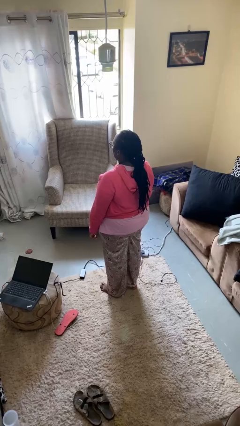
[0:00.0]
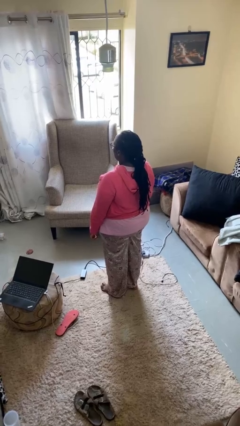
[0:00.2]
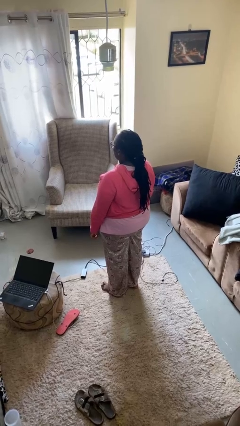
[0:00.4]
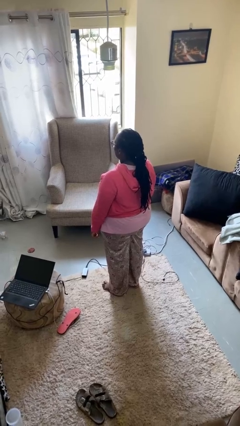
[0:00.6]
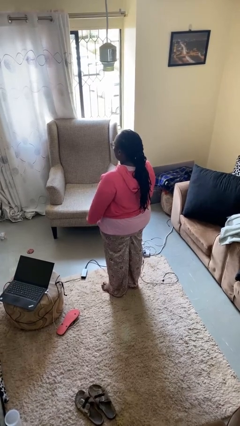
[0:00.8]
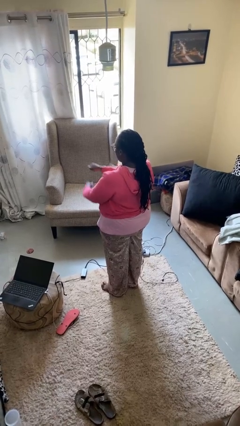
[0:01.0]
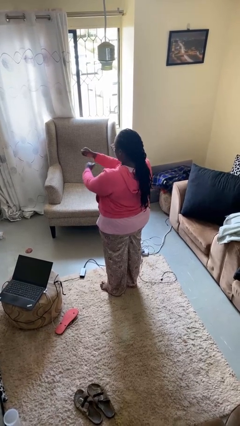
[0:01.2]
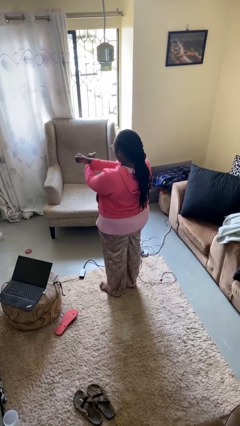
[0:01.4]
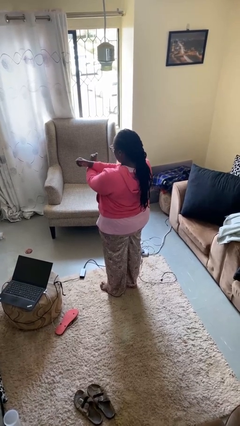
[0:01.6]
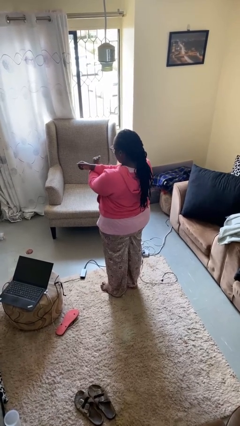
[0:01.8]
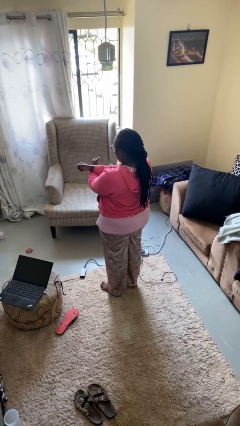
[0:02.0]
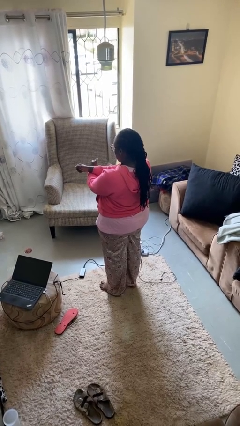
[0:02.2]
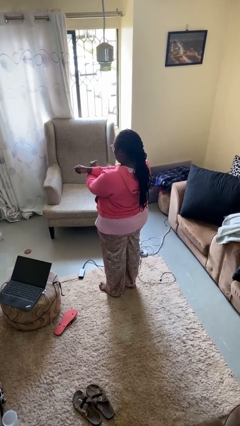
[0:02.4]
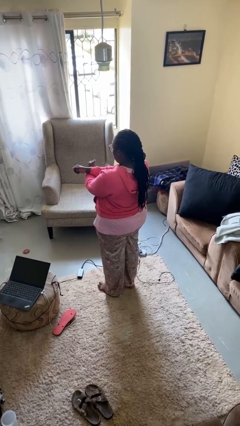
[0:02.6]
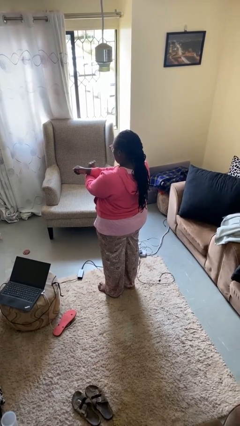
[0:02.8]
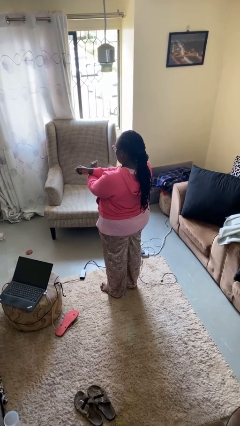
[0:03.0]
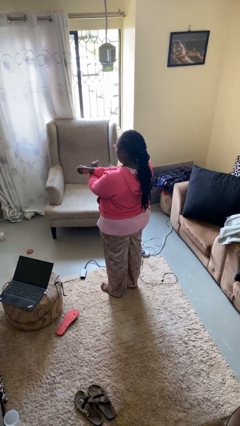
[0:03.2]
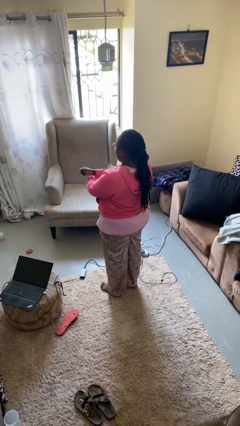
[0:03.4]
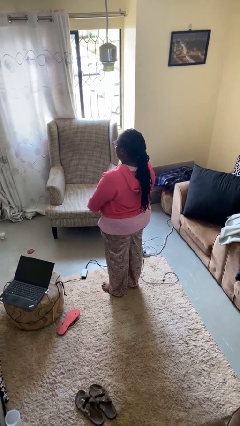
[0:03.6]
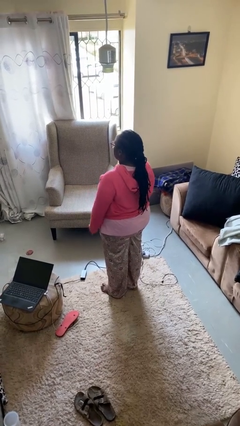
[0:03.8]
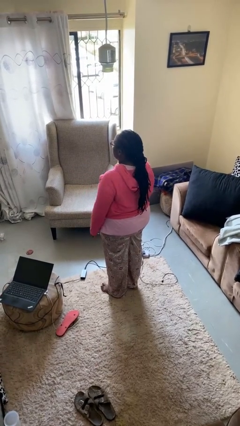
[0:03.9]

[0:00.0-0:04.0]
person gestures arms x

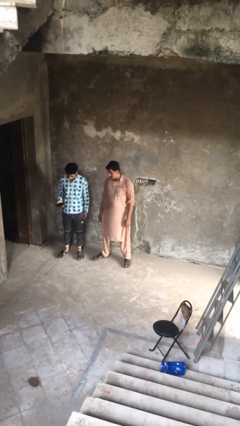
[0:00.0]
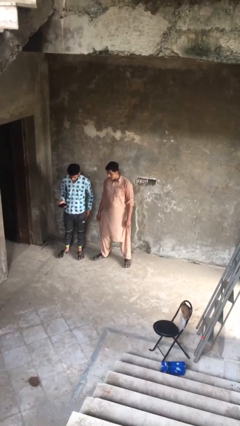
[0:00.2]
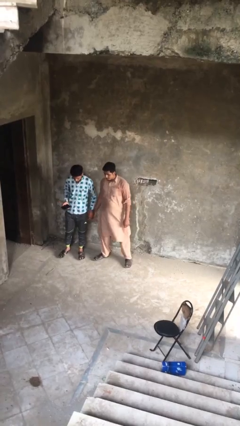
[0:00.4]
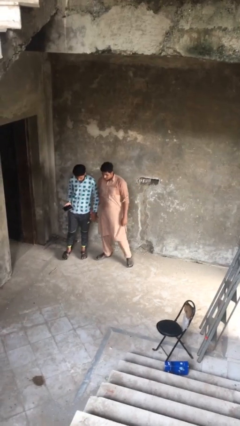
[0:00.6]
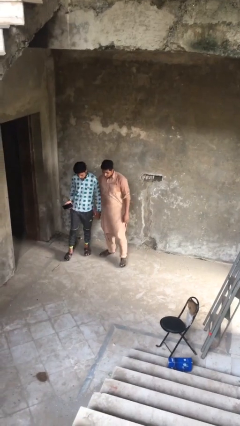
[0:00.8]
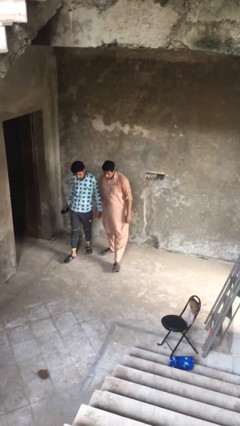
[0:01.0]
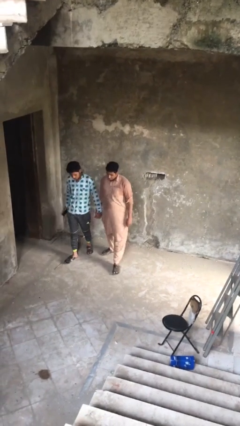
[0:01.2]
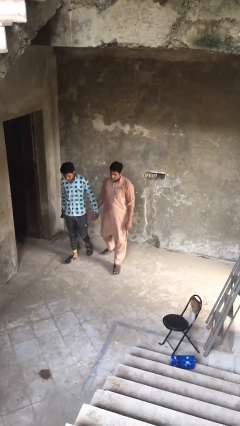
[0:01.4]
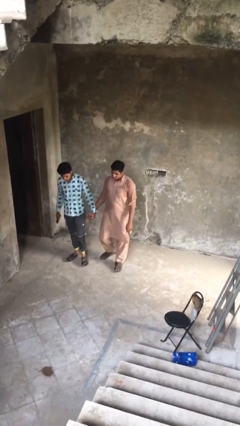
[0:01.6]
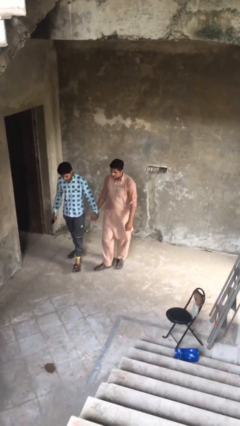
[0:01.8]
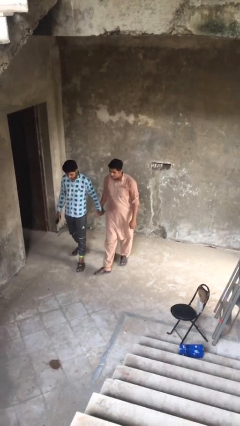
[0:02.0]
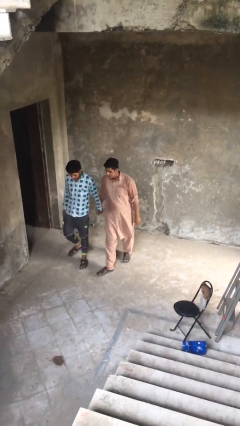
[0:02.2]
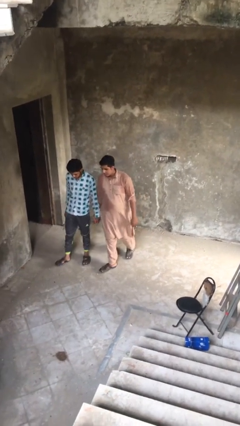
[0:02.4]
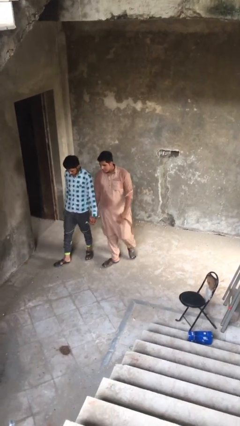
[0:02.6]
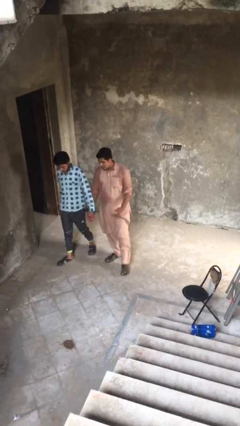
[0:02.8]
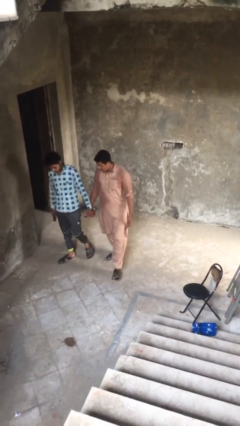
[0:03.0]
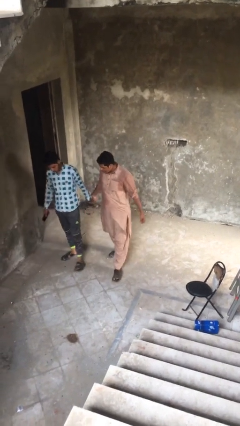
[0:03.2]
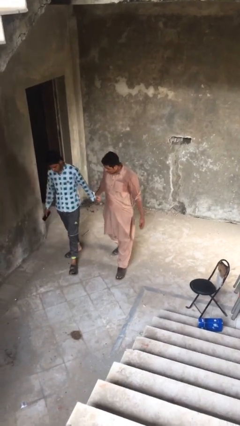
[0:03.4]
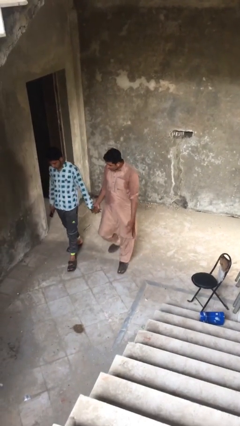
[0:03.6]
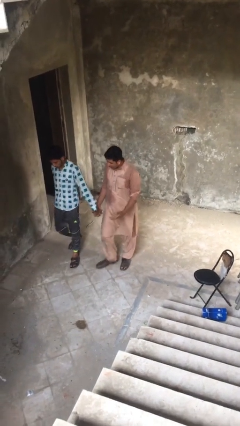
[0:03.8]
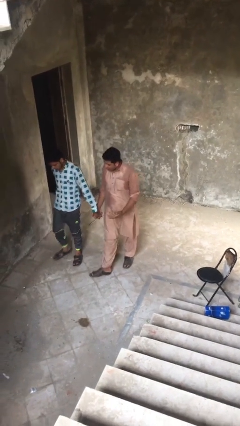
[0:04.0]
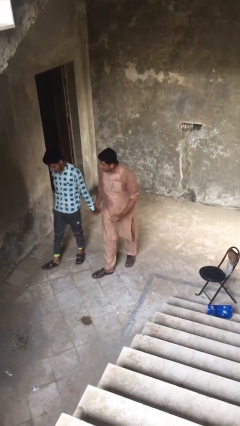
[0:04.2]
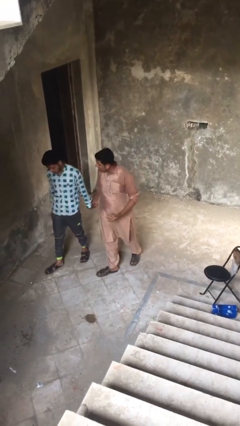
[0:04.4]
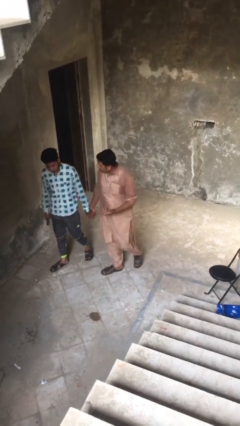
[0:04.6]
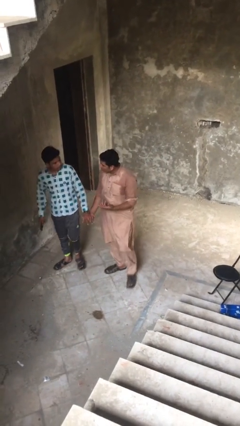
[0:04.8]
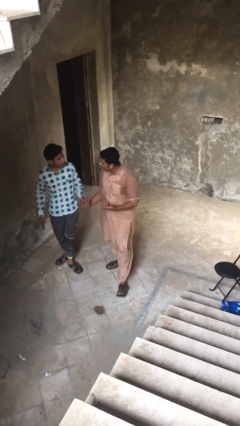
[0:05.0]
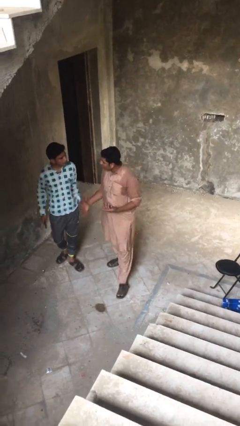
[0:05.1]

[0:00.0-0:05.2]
person holds hand

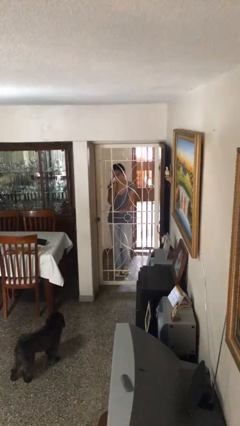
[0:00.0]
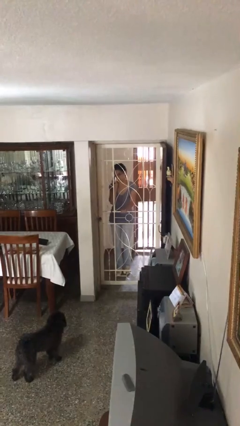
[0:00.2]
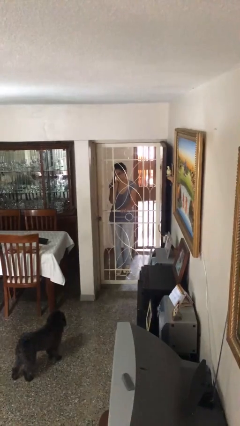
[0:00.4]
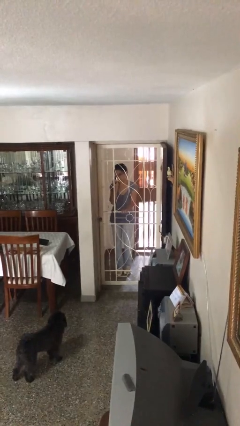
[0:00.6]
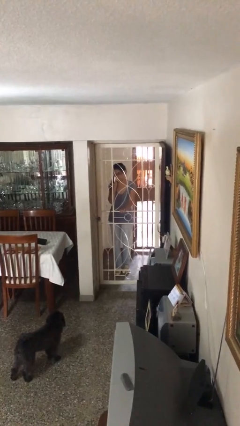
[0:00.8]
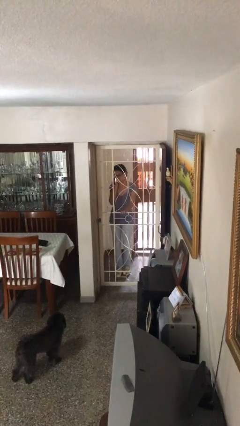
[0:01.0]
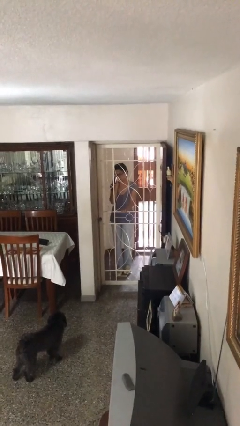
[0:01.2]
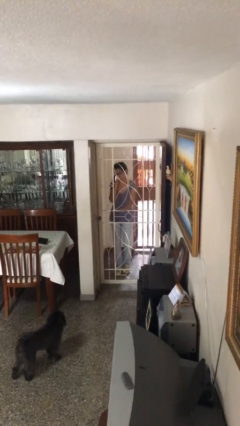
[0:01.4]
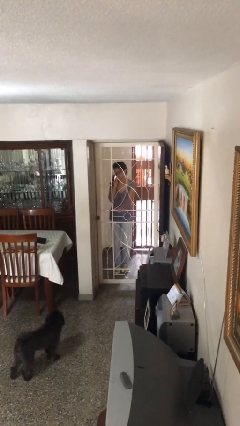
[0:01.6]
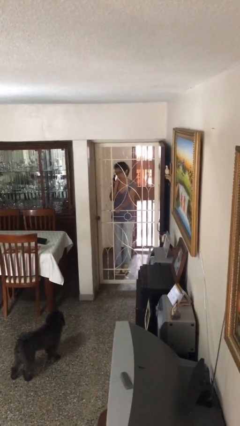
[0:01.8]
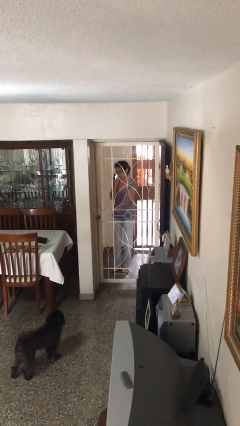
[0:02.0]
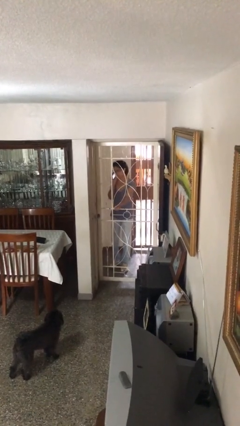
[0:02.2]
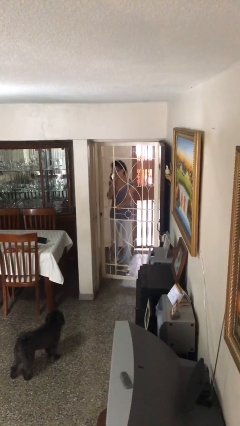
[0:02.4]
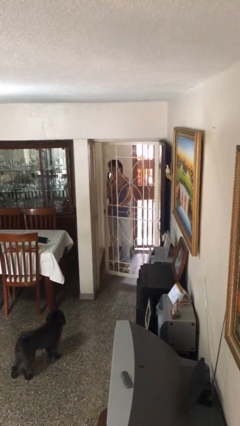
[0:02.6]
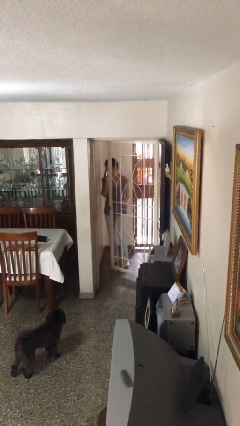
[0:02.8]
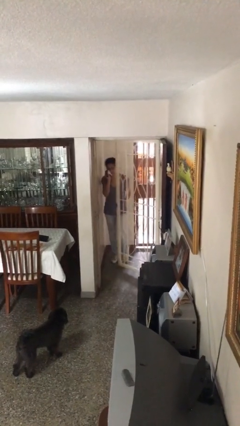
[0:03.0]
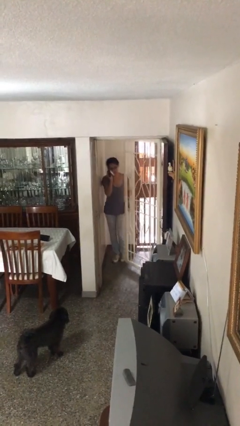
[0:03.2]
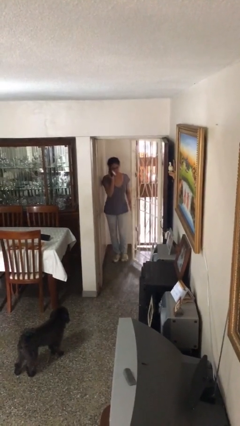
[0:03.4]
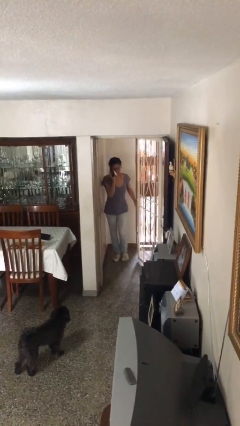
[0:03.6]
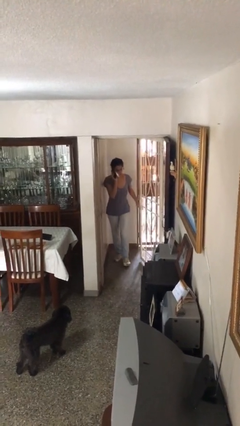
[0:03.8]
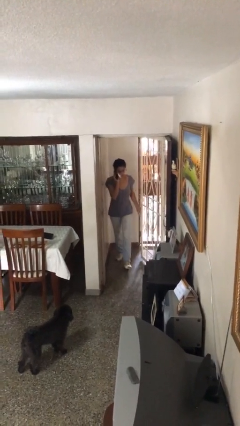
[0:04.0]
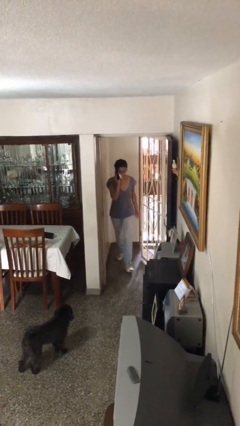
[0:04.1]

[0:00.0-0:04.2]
person opens facility door

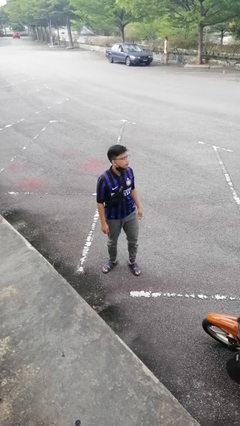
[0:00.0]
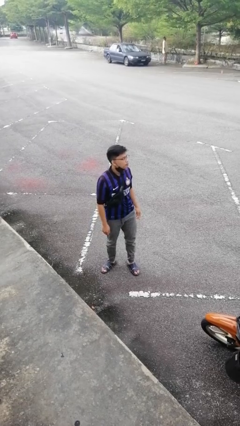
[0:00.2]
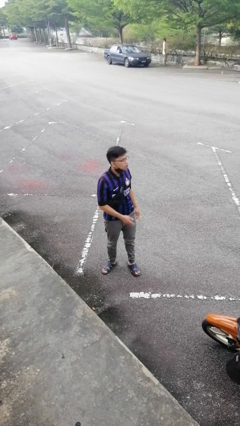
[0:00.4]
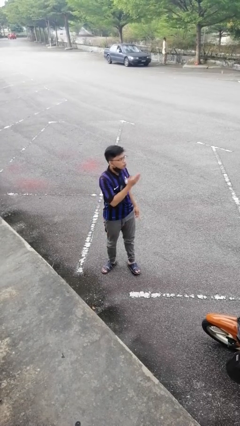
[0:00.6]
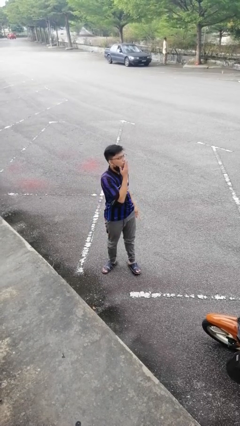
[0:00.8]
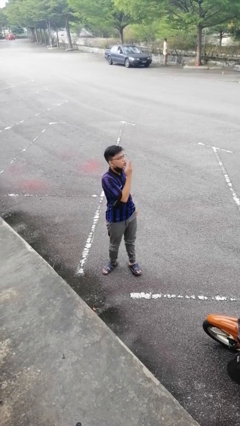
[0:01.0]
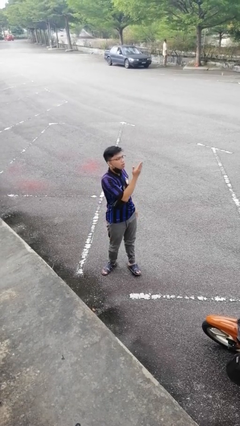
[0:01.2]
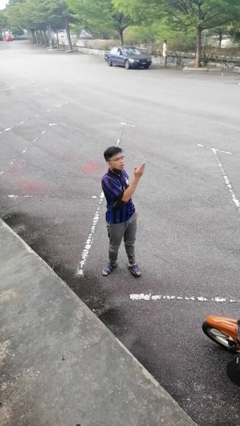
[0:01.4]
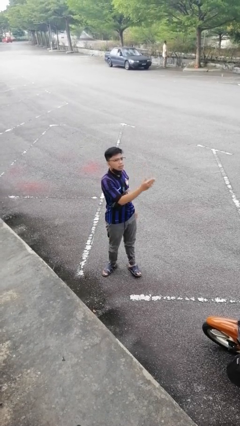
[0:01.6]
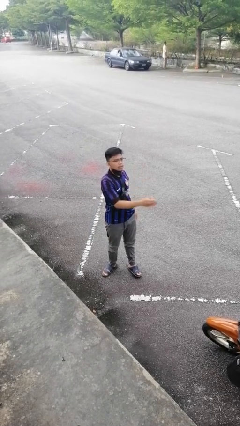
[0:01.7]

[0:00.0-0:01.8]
person gestures blow kiss

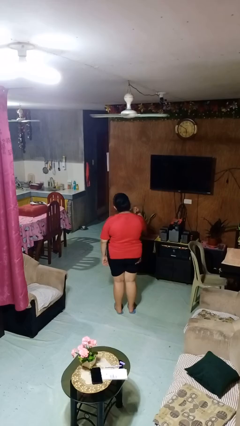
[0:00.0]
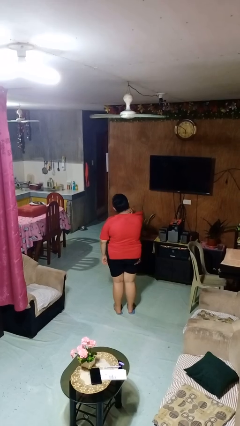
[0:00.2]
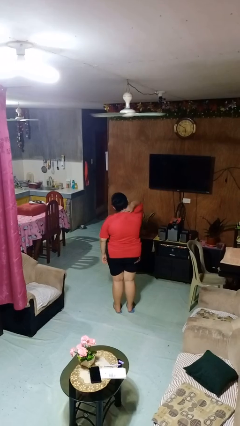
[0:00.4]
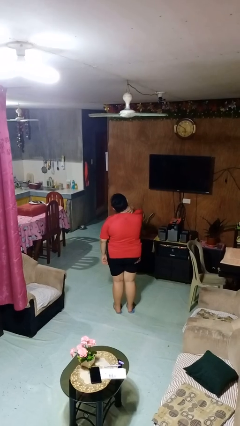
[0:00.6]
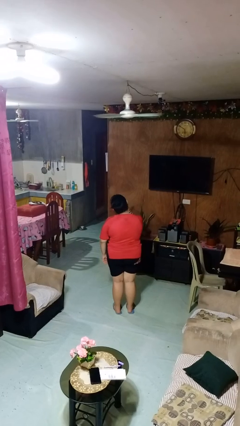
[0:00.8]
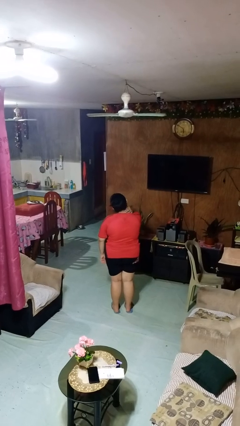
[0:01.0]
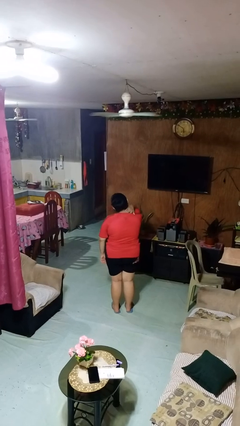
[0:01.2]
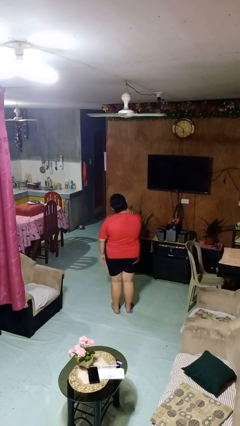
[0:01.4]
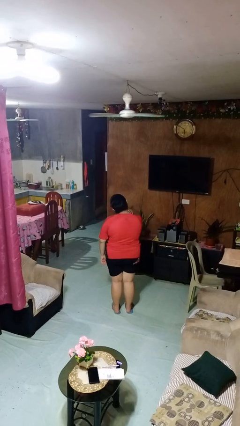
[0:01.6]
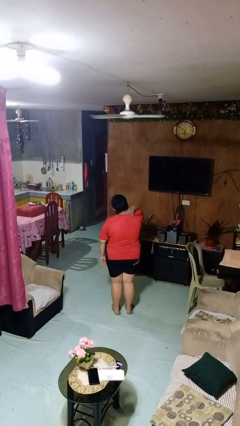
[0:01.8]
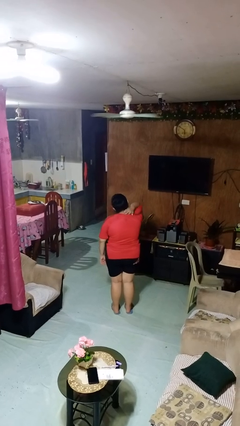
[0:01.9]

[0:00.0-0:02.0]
person rubs neck
